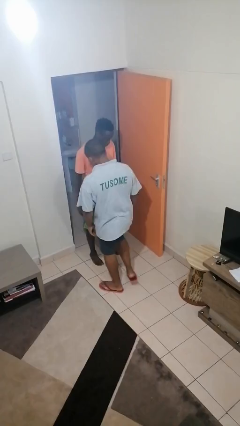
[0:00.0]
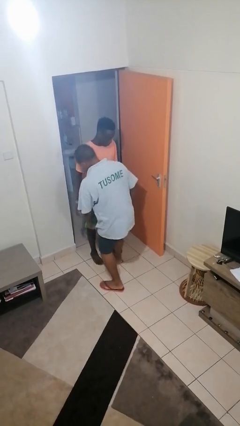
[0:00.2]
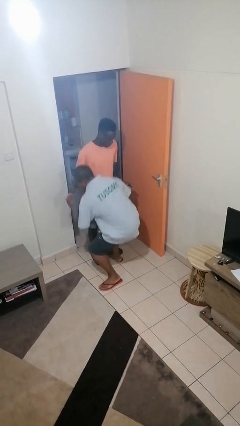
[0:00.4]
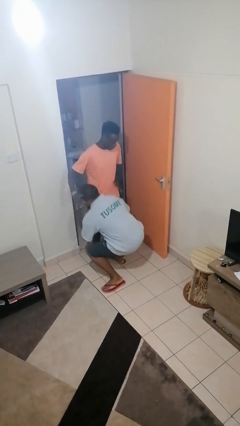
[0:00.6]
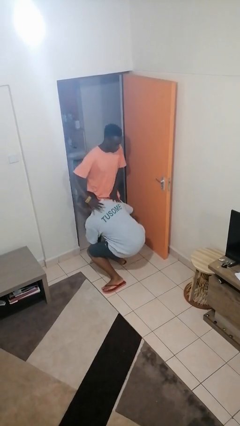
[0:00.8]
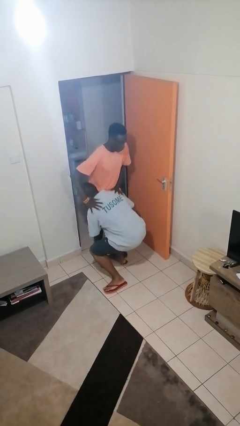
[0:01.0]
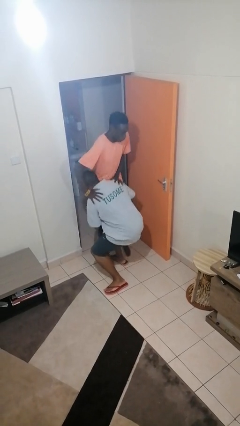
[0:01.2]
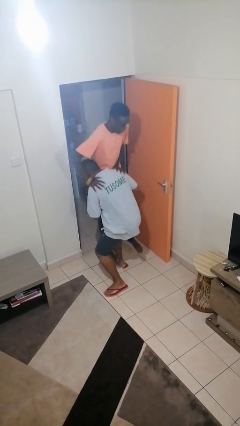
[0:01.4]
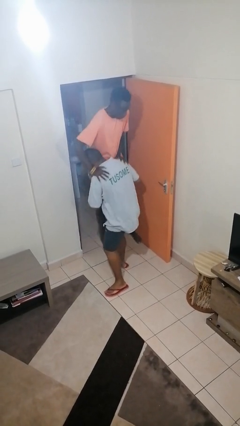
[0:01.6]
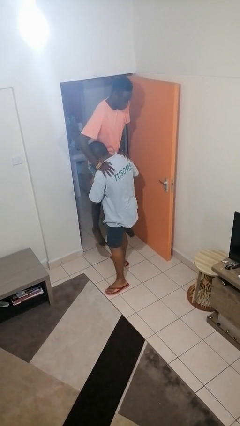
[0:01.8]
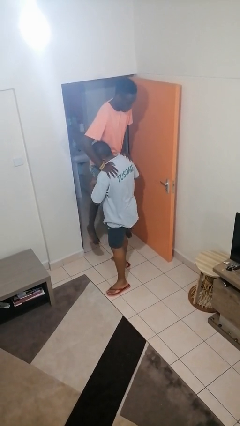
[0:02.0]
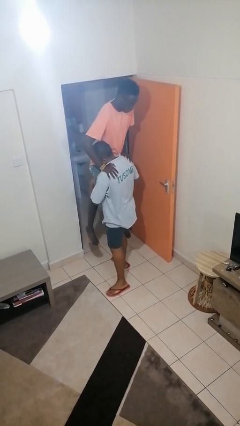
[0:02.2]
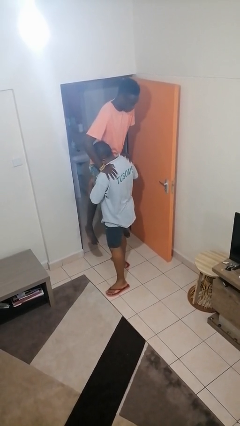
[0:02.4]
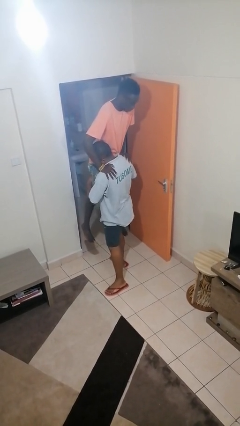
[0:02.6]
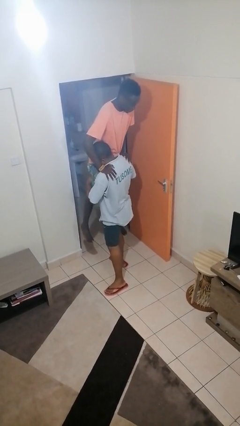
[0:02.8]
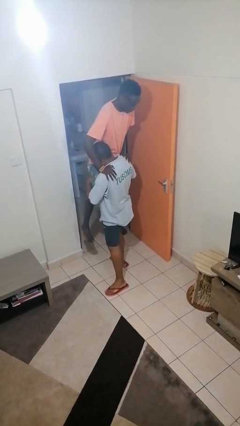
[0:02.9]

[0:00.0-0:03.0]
person carries person over shoulder

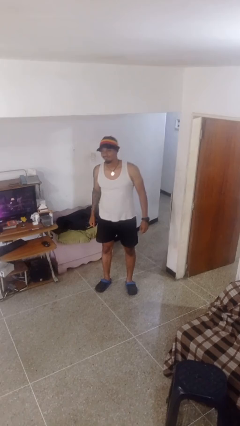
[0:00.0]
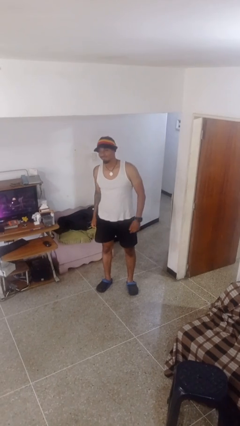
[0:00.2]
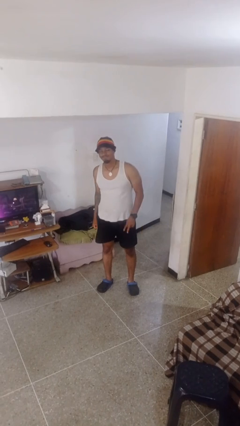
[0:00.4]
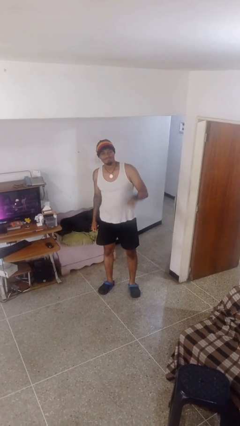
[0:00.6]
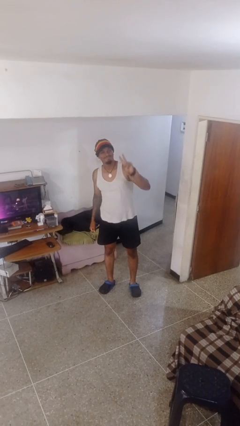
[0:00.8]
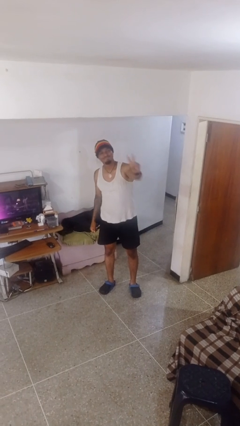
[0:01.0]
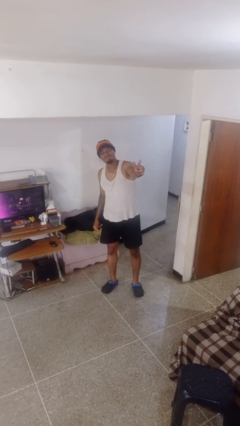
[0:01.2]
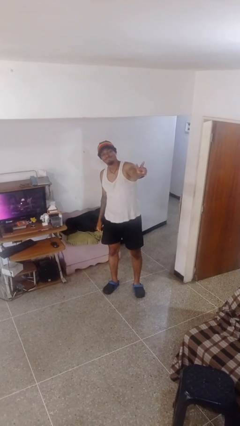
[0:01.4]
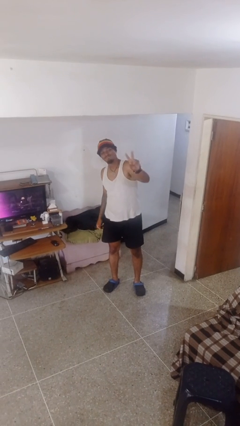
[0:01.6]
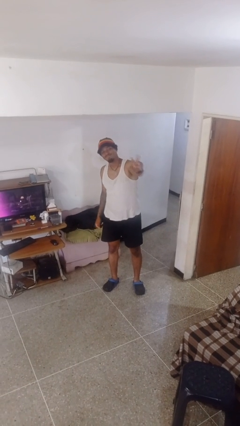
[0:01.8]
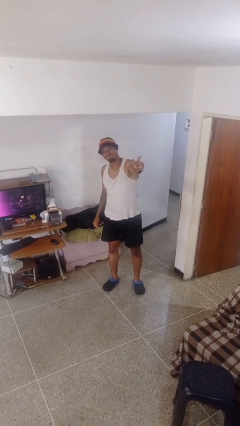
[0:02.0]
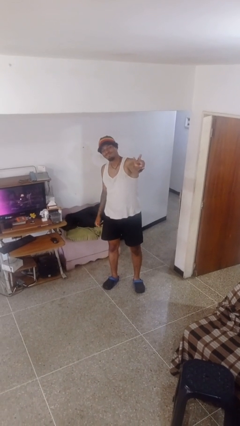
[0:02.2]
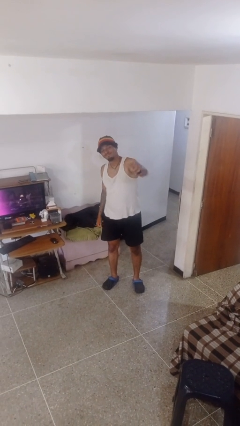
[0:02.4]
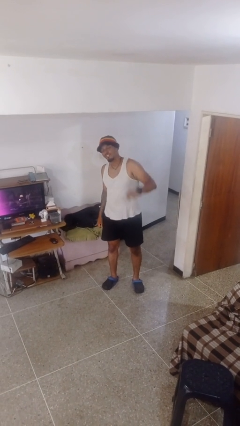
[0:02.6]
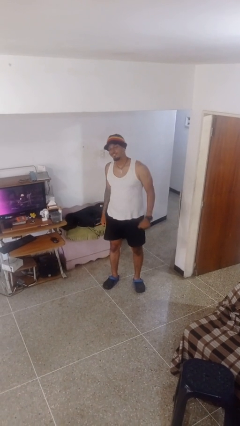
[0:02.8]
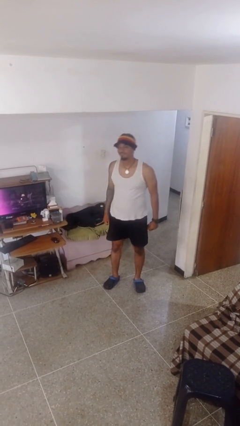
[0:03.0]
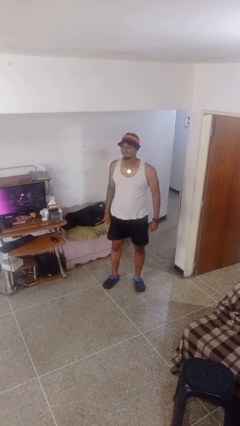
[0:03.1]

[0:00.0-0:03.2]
person gestures peace

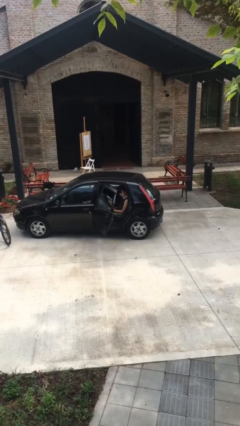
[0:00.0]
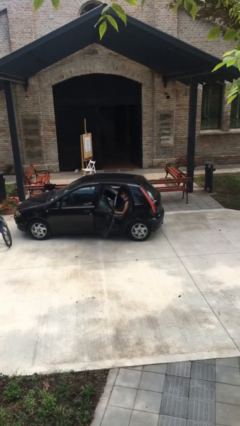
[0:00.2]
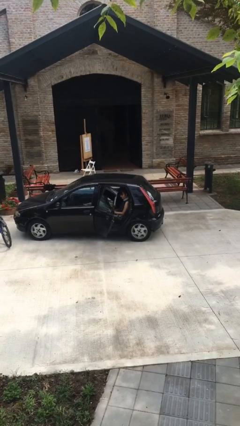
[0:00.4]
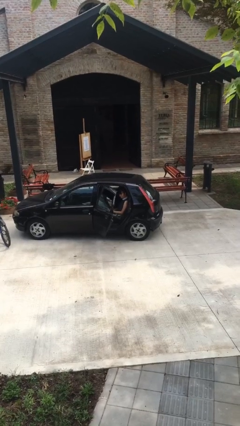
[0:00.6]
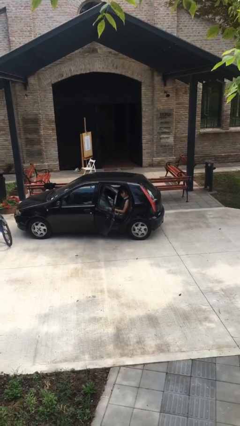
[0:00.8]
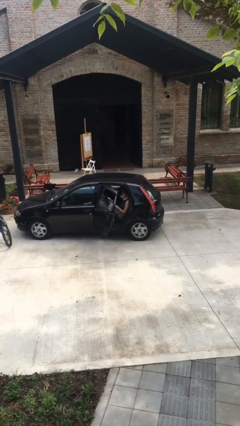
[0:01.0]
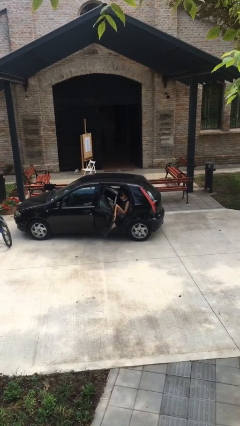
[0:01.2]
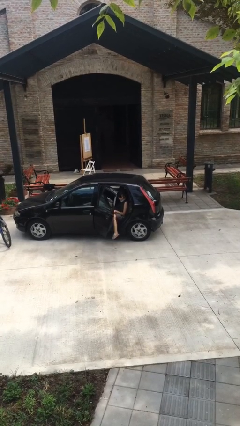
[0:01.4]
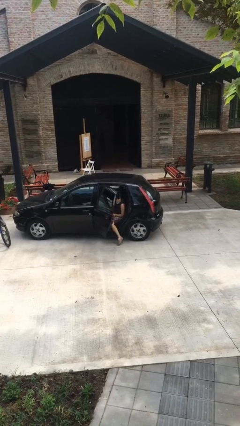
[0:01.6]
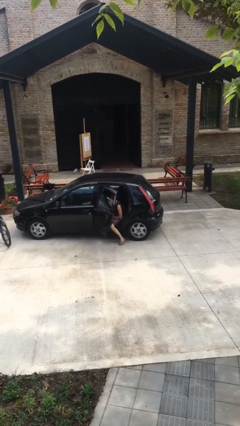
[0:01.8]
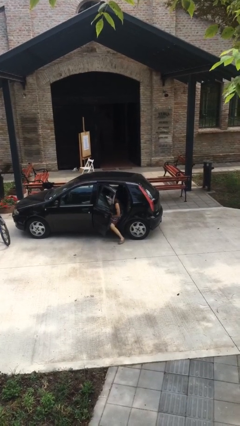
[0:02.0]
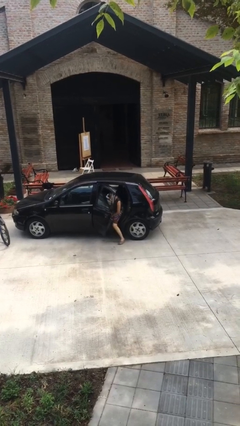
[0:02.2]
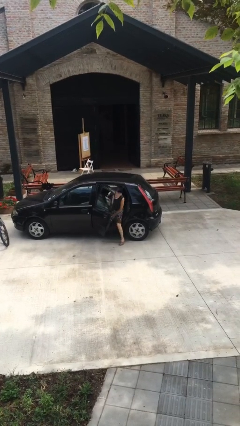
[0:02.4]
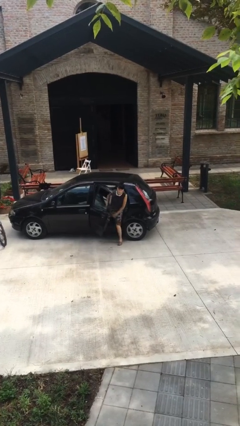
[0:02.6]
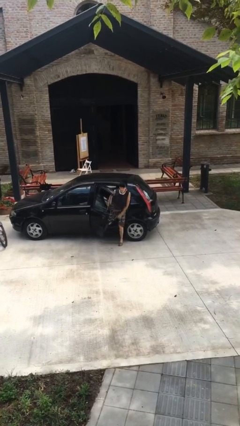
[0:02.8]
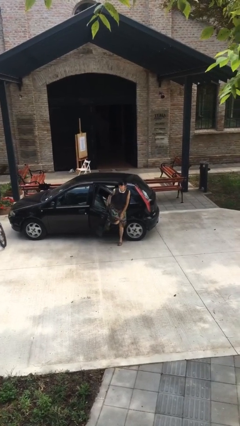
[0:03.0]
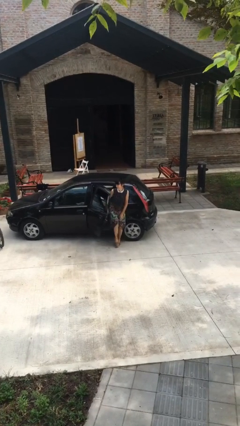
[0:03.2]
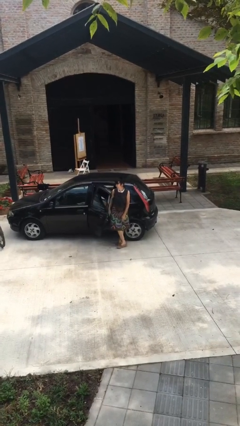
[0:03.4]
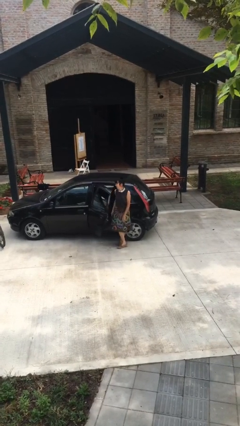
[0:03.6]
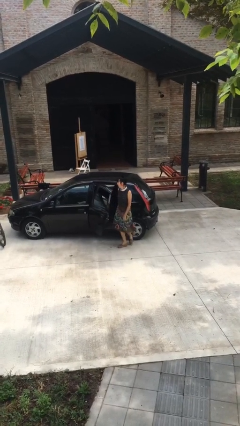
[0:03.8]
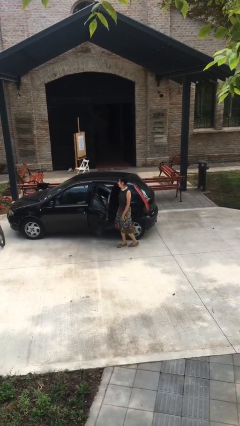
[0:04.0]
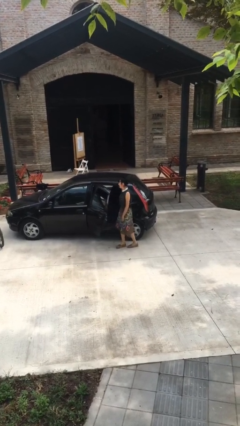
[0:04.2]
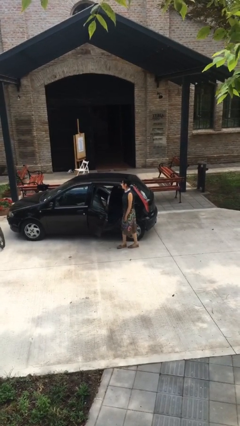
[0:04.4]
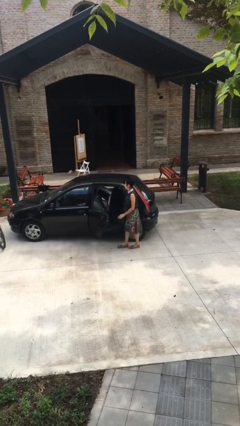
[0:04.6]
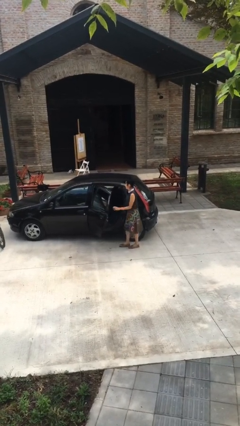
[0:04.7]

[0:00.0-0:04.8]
person exits car

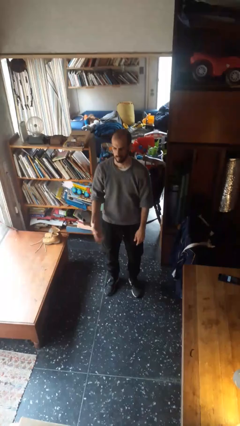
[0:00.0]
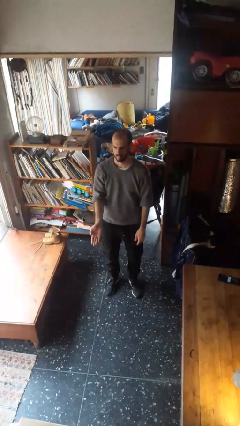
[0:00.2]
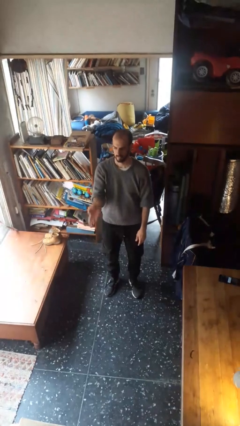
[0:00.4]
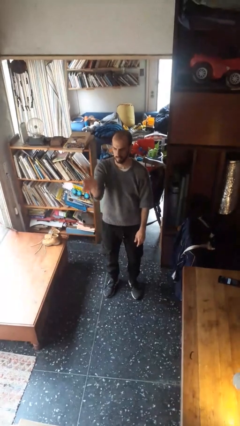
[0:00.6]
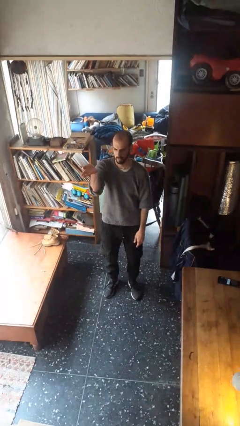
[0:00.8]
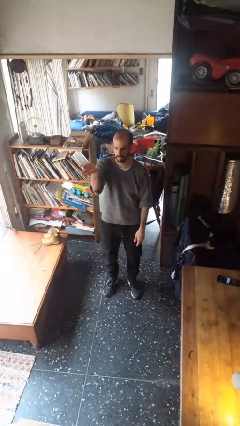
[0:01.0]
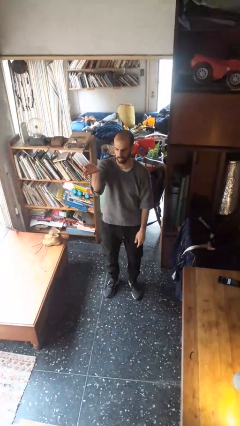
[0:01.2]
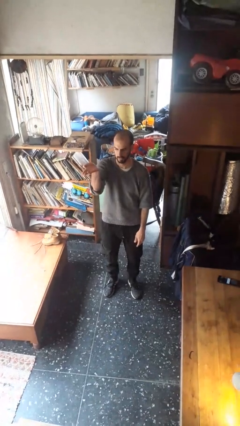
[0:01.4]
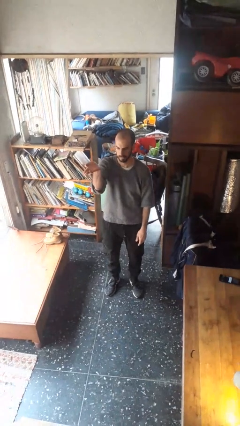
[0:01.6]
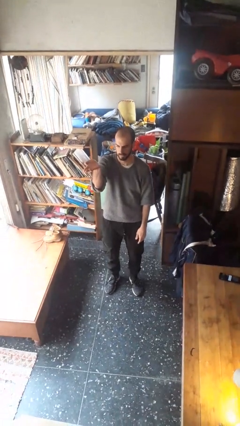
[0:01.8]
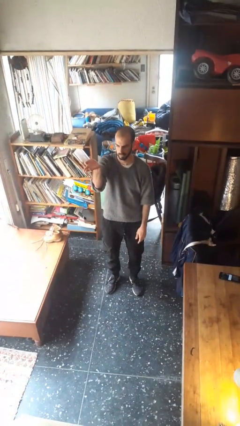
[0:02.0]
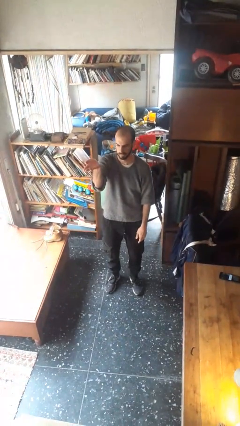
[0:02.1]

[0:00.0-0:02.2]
person gestures swipe up

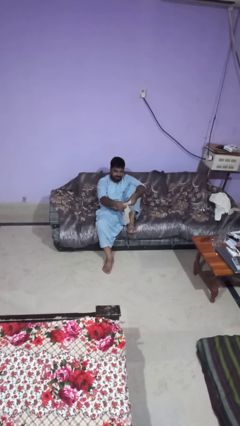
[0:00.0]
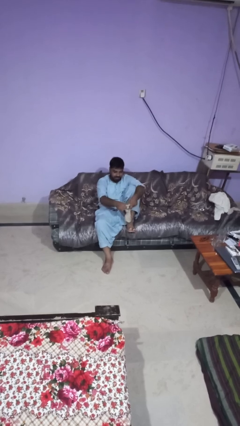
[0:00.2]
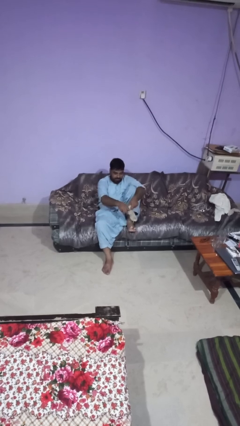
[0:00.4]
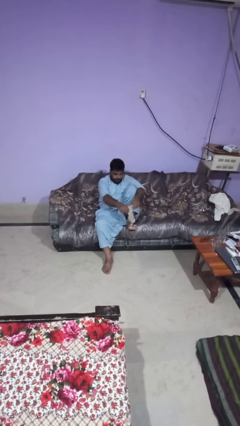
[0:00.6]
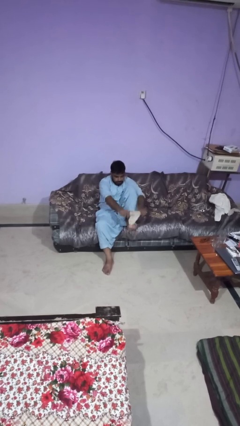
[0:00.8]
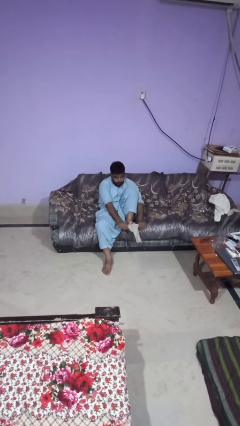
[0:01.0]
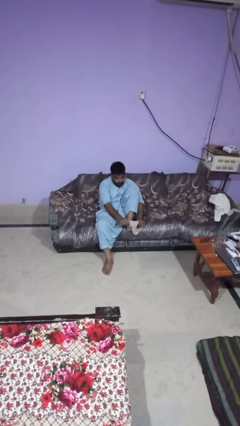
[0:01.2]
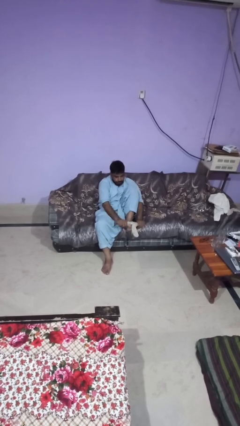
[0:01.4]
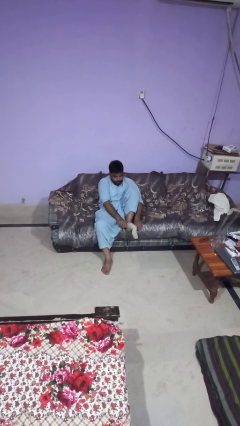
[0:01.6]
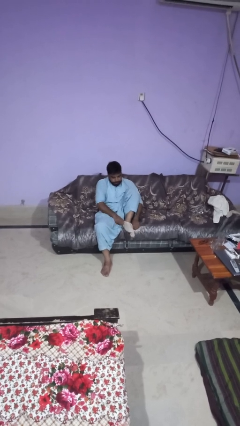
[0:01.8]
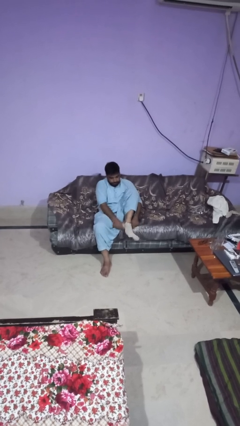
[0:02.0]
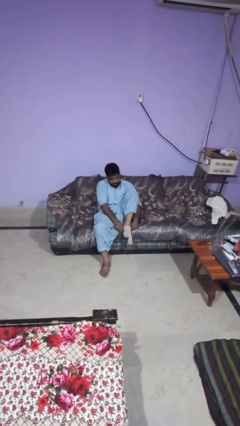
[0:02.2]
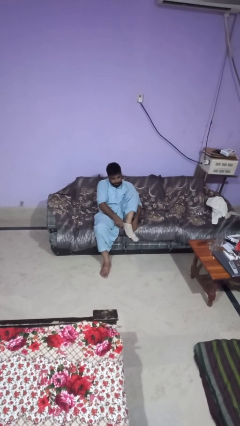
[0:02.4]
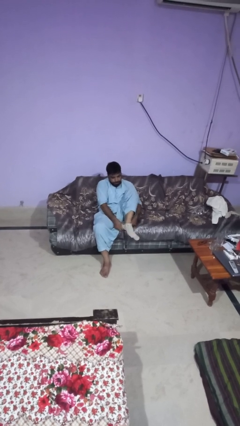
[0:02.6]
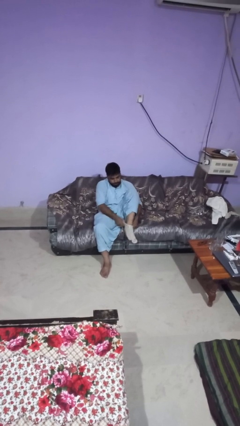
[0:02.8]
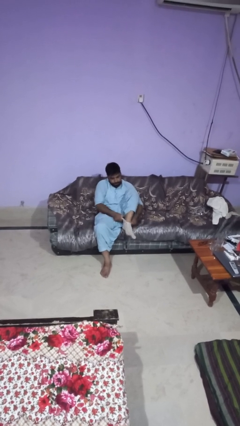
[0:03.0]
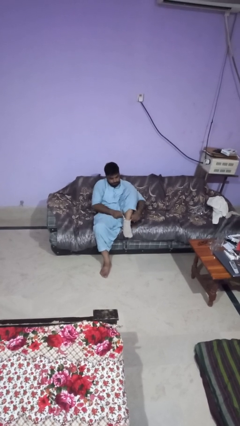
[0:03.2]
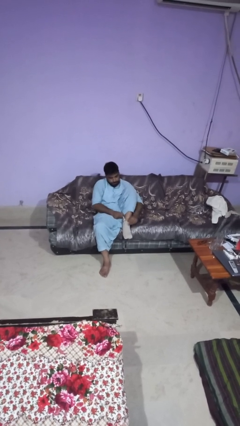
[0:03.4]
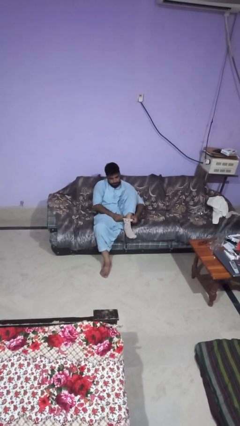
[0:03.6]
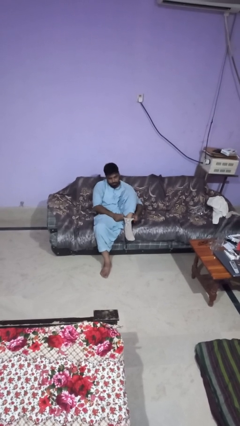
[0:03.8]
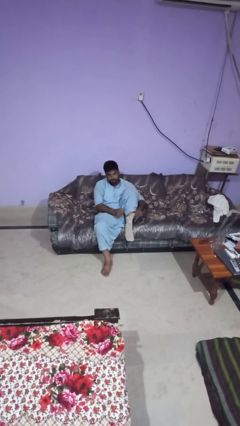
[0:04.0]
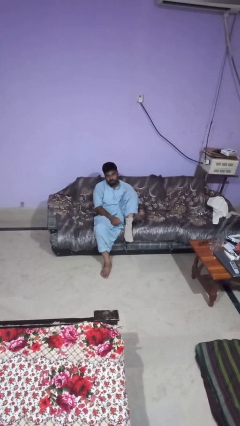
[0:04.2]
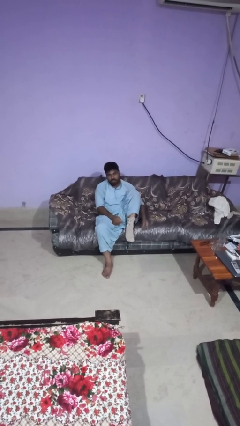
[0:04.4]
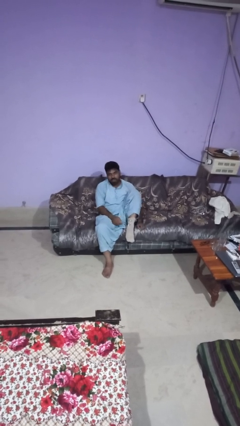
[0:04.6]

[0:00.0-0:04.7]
person puts on socks
